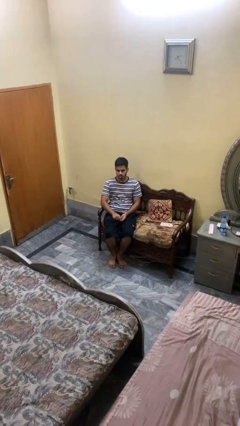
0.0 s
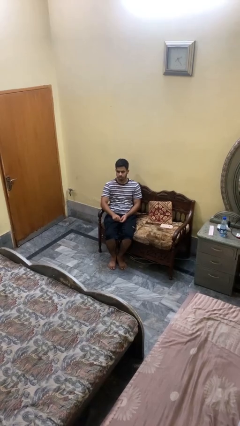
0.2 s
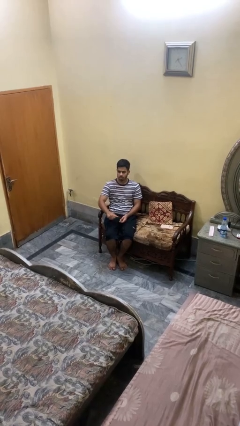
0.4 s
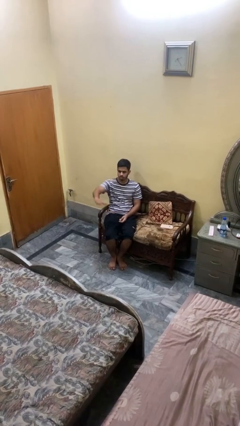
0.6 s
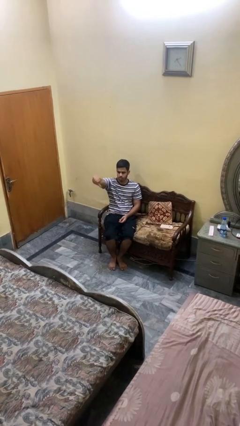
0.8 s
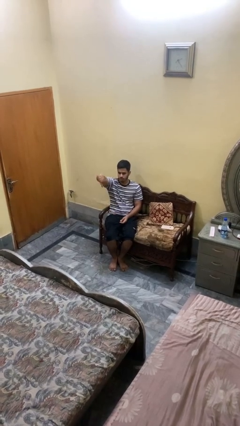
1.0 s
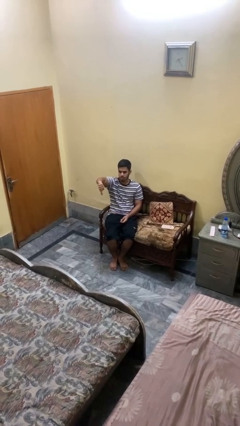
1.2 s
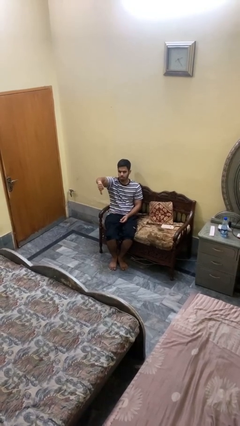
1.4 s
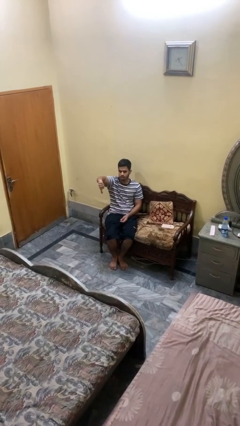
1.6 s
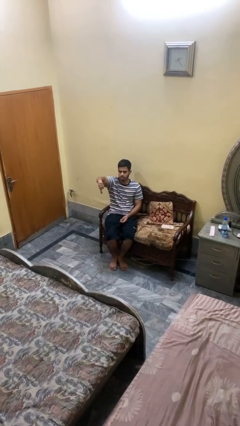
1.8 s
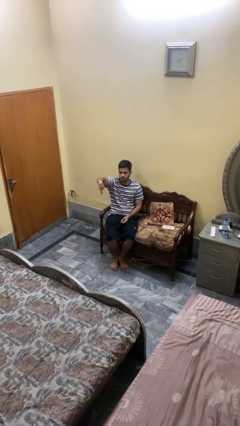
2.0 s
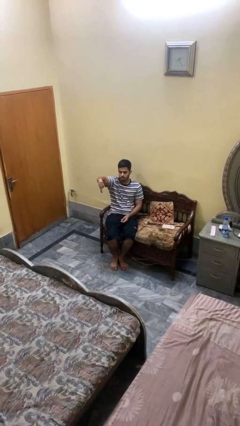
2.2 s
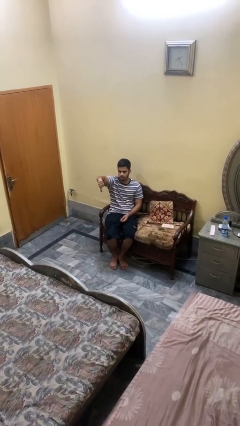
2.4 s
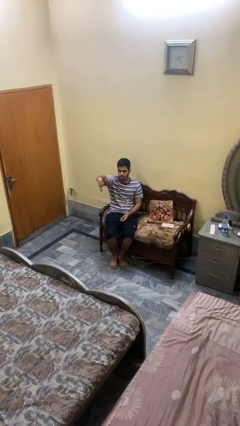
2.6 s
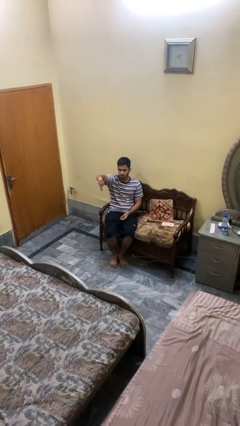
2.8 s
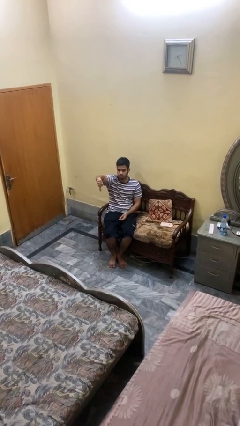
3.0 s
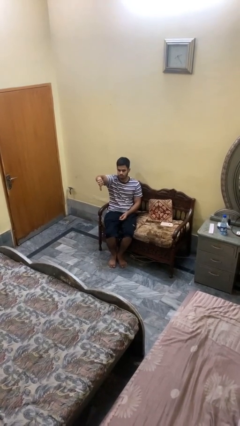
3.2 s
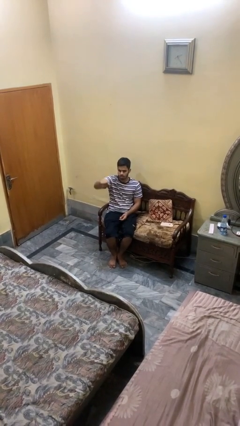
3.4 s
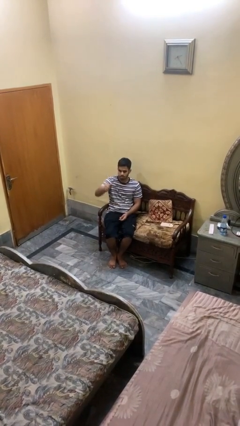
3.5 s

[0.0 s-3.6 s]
person gestures thumbs down

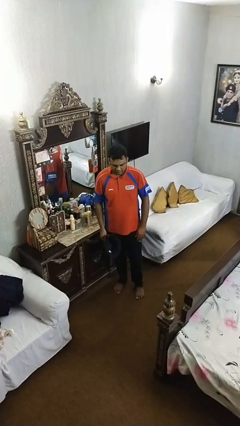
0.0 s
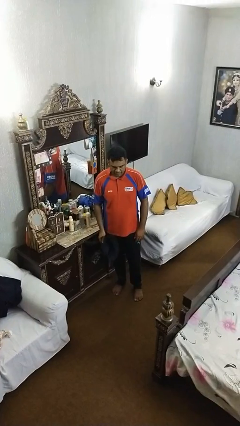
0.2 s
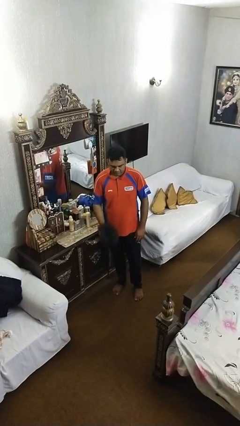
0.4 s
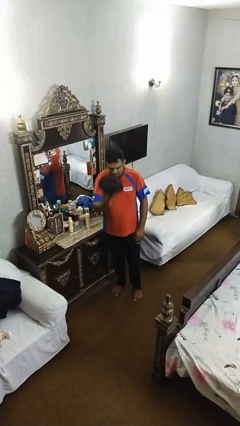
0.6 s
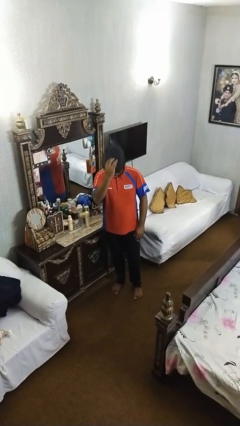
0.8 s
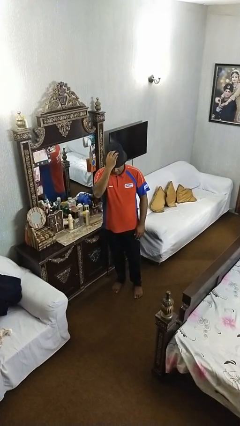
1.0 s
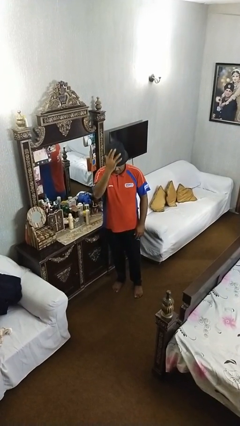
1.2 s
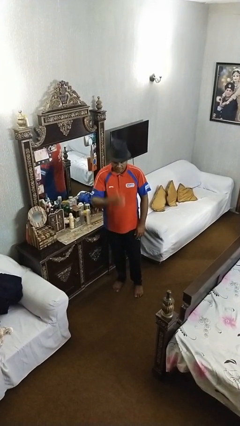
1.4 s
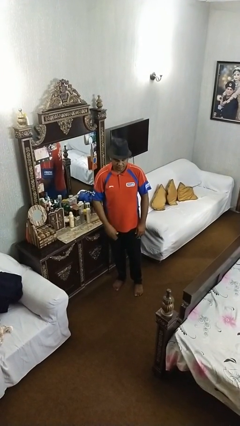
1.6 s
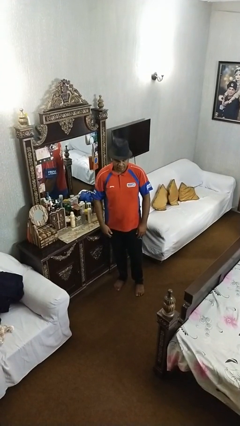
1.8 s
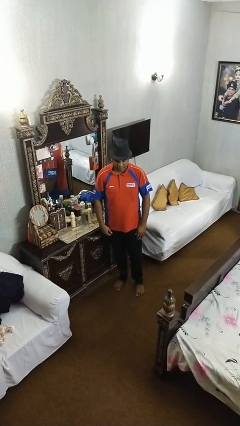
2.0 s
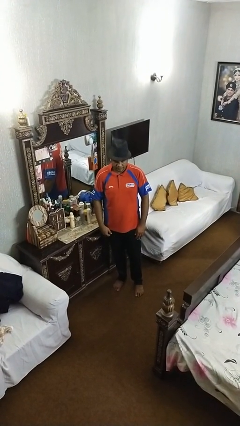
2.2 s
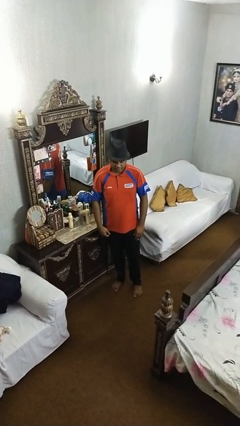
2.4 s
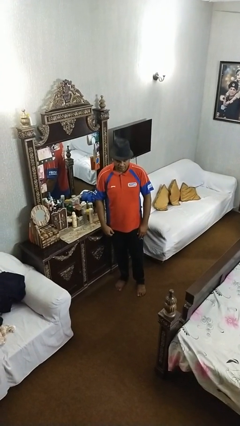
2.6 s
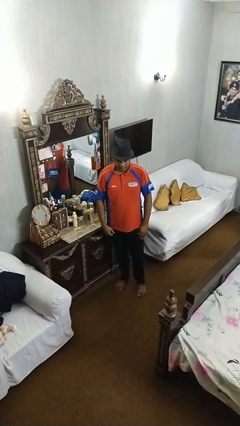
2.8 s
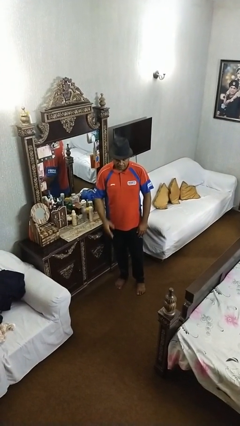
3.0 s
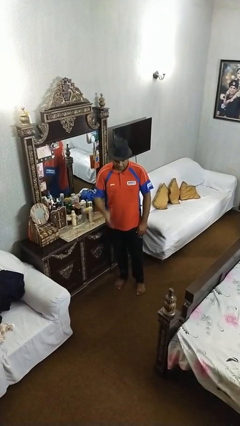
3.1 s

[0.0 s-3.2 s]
person puts on hat

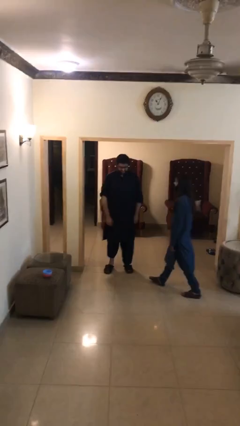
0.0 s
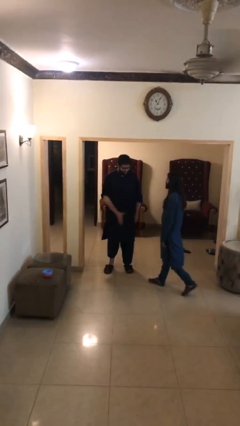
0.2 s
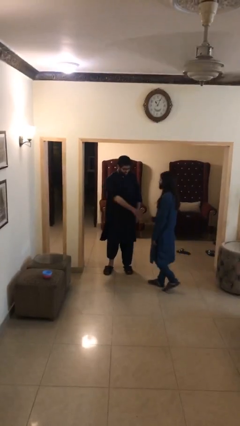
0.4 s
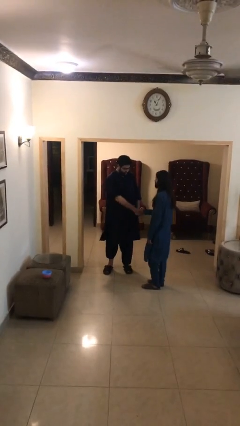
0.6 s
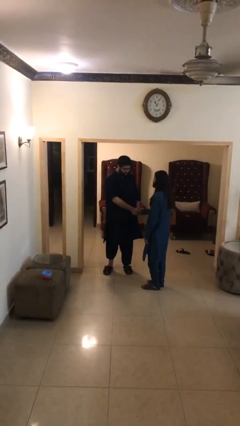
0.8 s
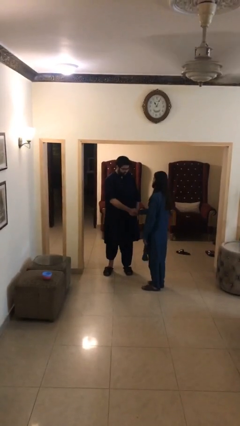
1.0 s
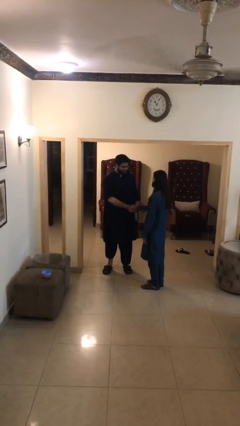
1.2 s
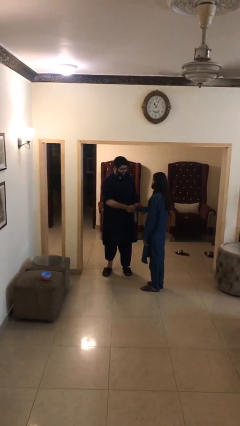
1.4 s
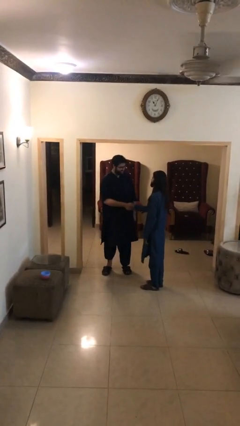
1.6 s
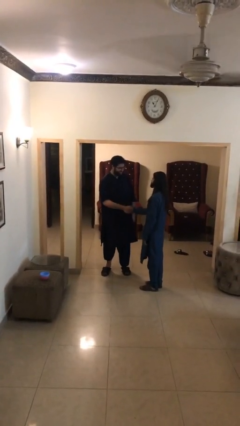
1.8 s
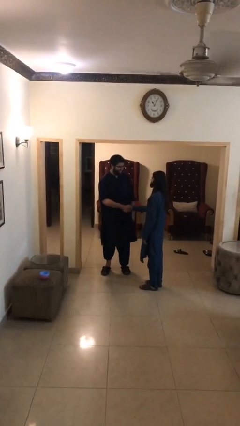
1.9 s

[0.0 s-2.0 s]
person shakes hand

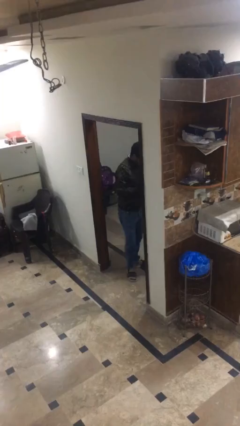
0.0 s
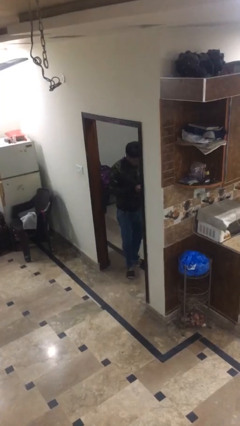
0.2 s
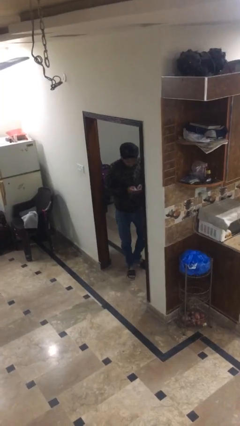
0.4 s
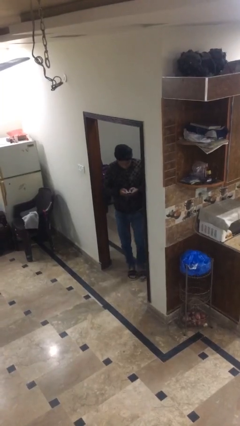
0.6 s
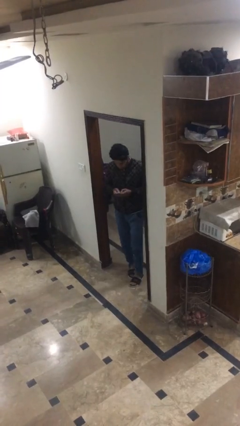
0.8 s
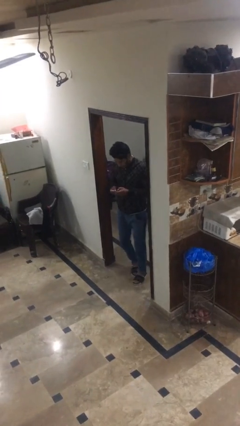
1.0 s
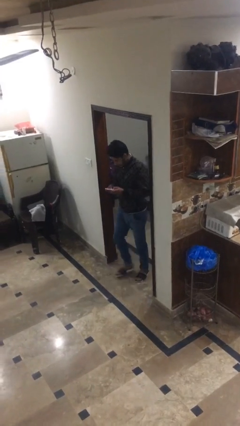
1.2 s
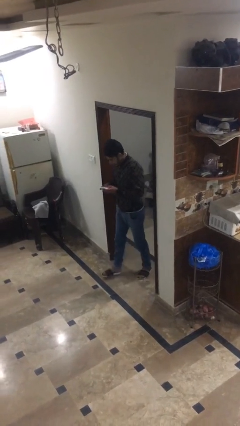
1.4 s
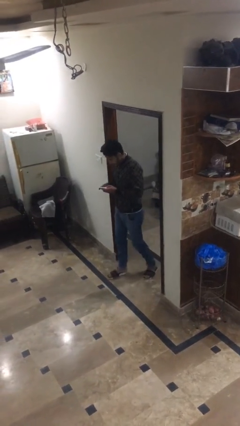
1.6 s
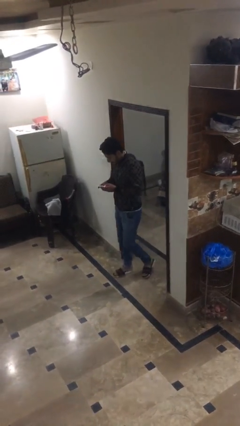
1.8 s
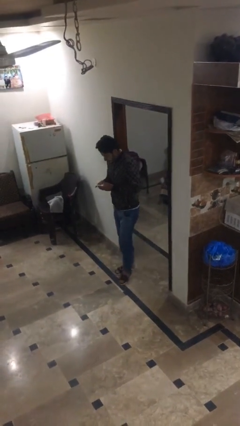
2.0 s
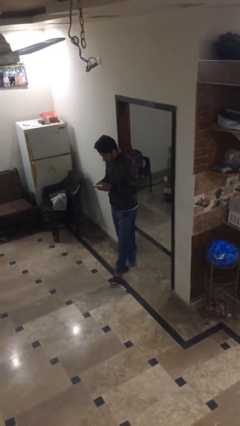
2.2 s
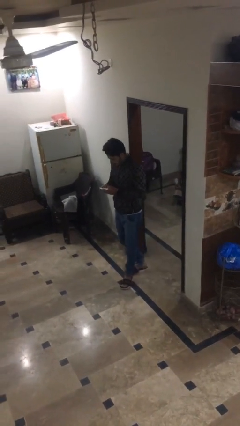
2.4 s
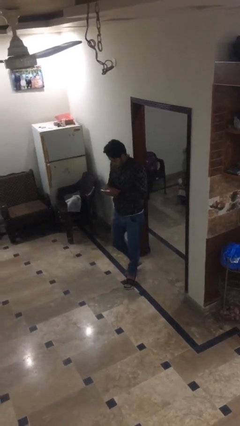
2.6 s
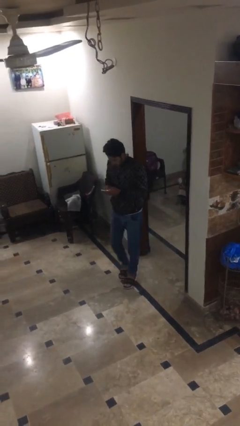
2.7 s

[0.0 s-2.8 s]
person exits scene through structure

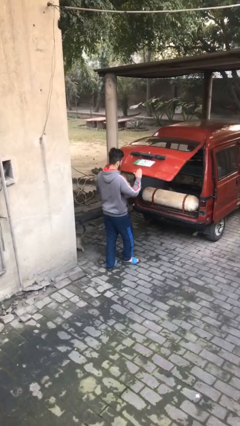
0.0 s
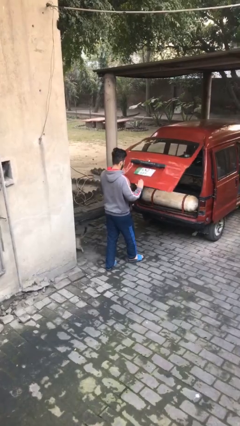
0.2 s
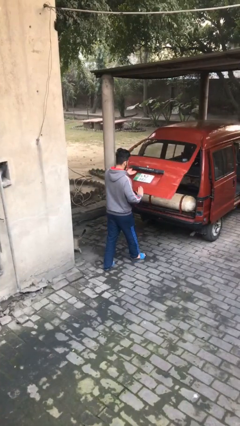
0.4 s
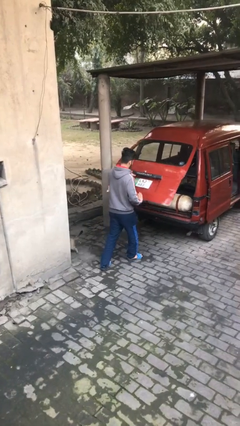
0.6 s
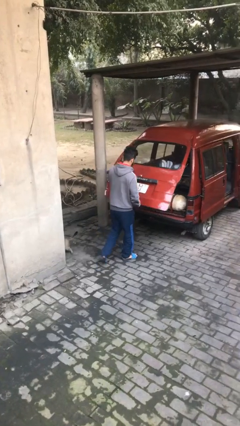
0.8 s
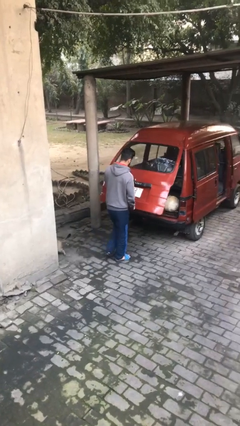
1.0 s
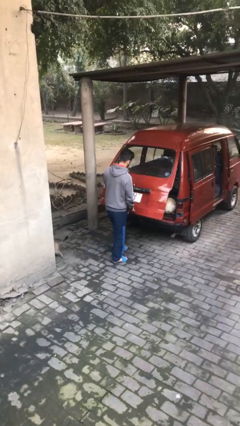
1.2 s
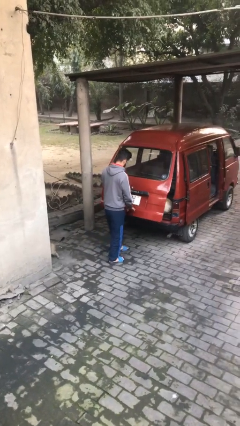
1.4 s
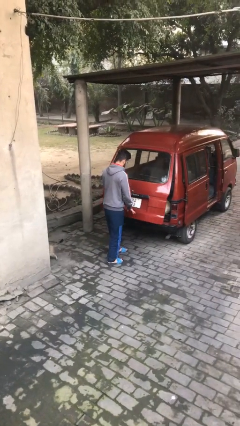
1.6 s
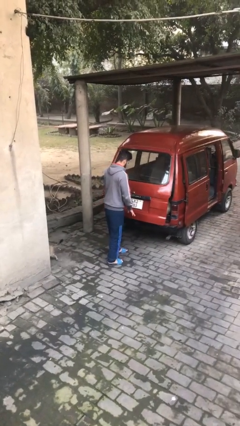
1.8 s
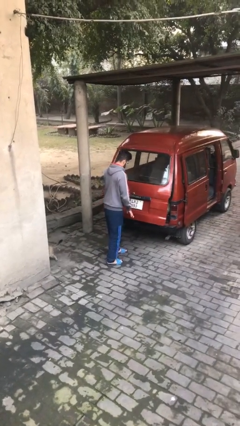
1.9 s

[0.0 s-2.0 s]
person closes car trunk

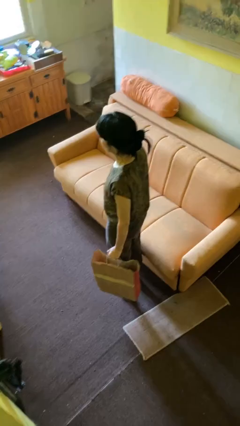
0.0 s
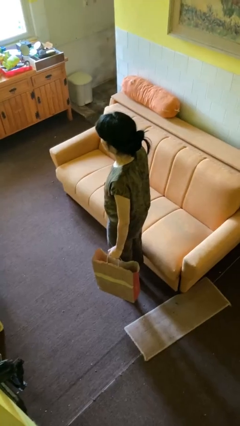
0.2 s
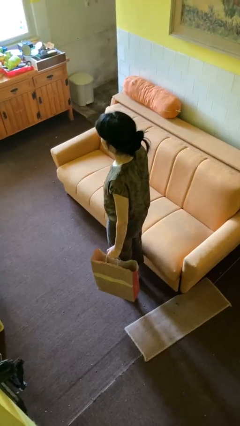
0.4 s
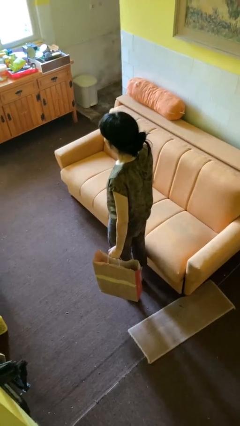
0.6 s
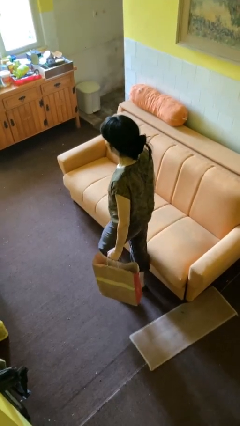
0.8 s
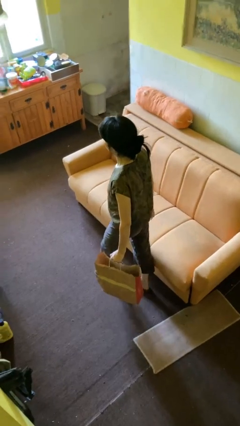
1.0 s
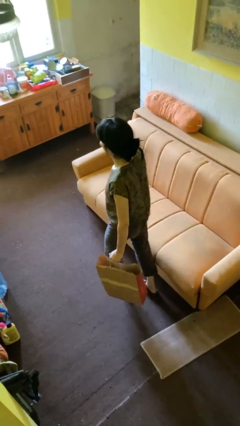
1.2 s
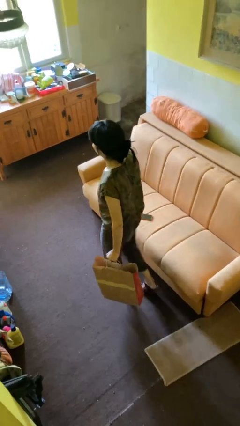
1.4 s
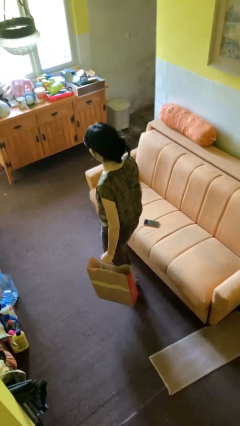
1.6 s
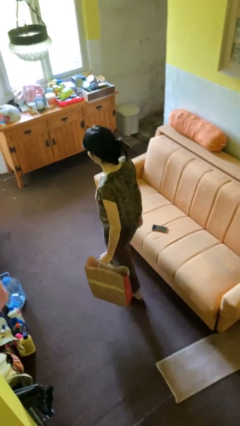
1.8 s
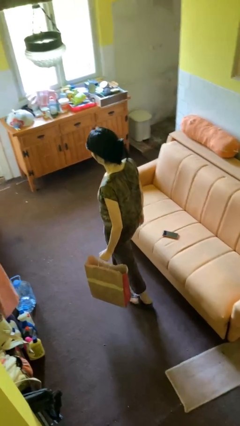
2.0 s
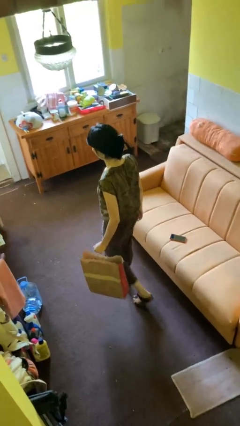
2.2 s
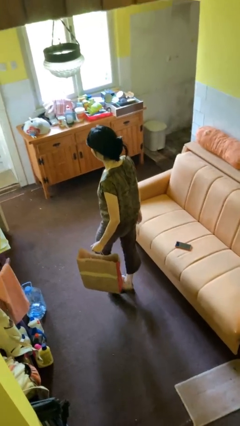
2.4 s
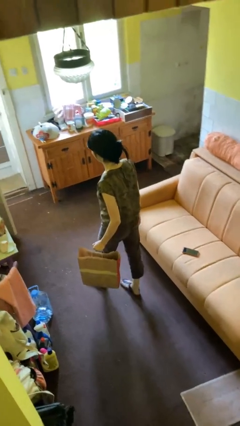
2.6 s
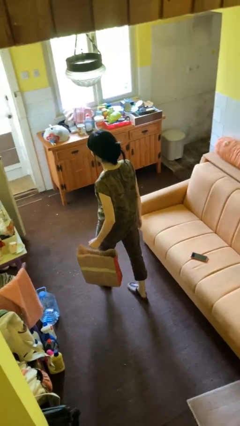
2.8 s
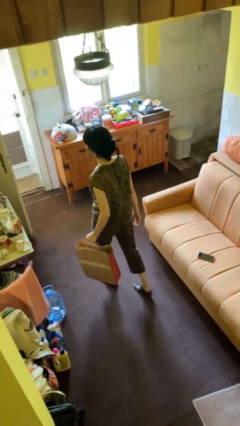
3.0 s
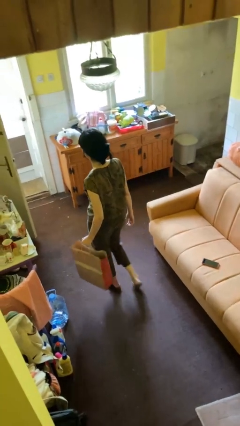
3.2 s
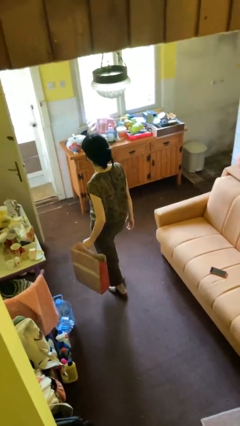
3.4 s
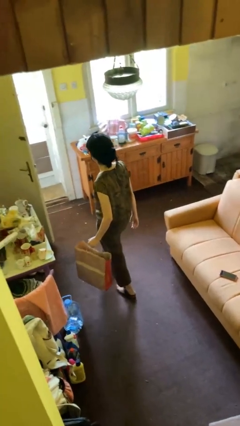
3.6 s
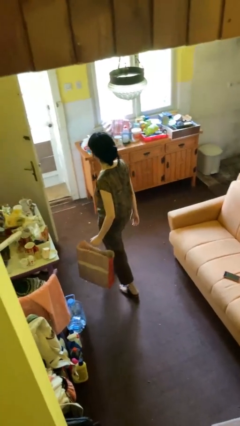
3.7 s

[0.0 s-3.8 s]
person carries groceries

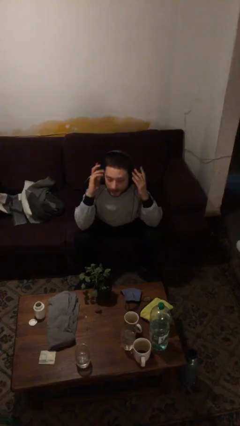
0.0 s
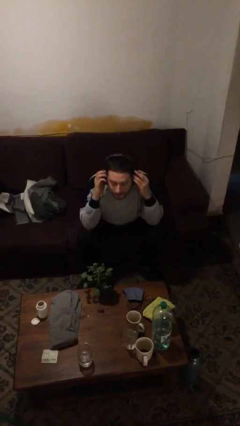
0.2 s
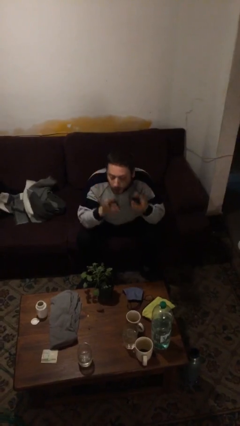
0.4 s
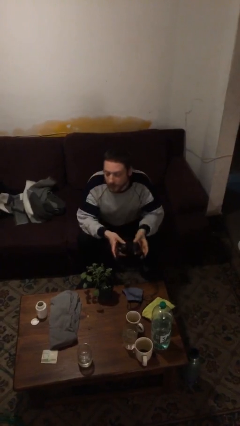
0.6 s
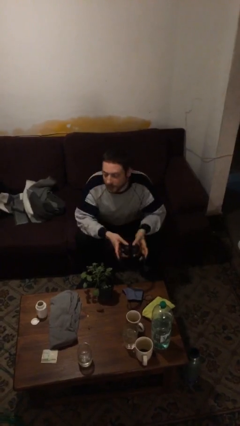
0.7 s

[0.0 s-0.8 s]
person takes off headphones
